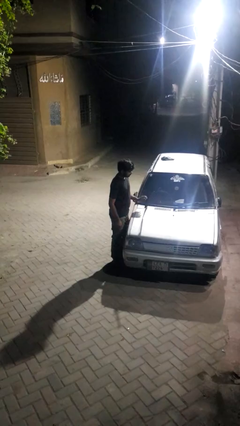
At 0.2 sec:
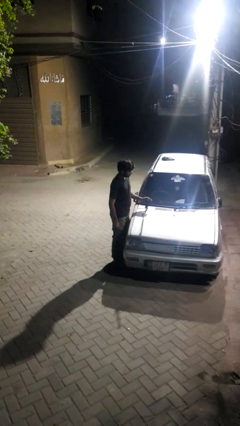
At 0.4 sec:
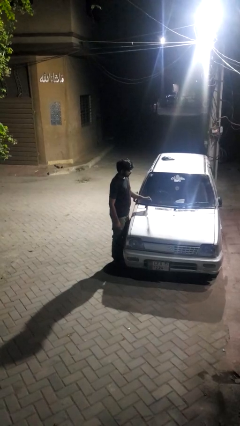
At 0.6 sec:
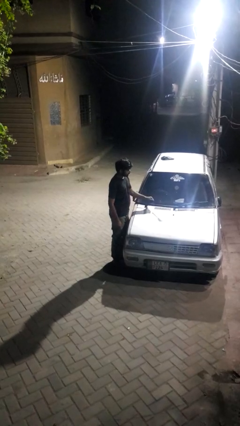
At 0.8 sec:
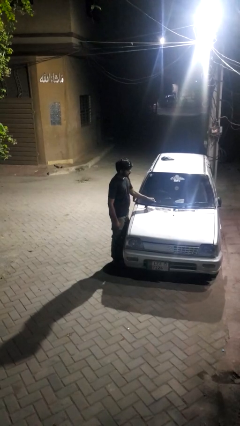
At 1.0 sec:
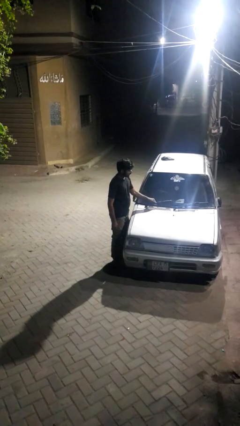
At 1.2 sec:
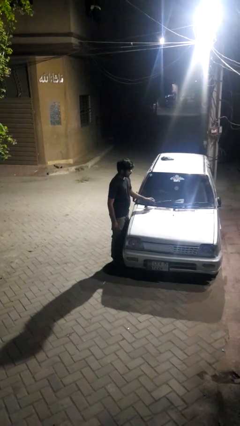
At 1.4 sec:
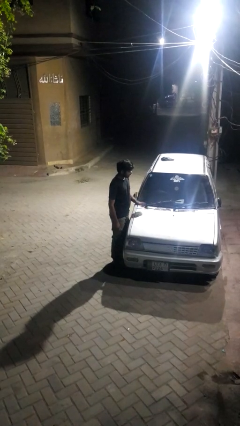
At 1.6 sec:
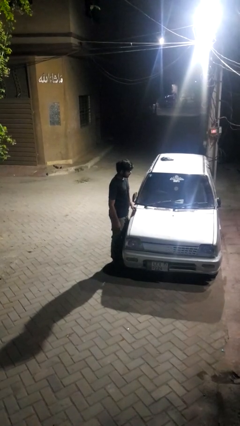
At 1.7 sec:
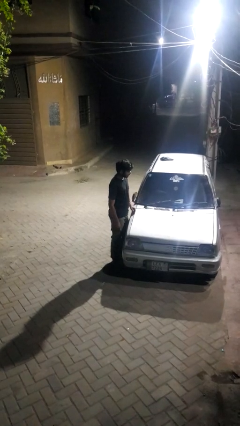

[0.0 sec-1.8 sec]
person flips down car wipers

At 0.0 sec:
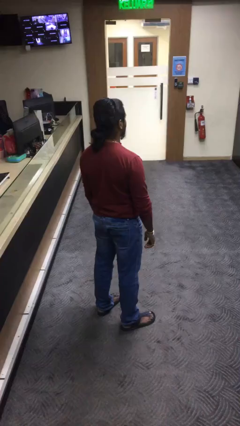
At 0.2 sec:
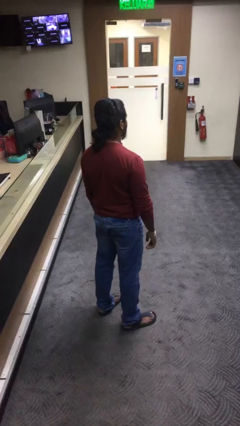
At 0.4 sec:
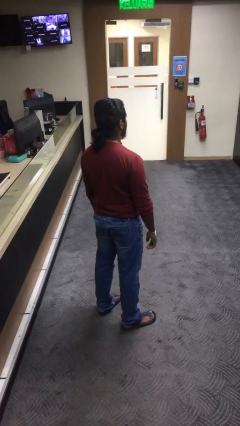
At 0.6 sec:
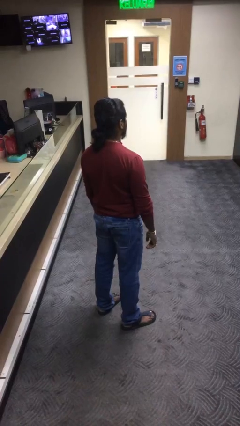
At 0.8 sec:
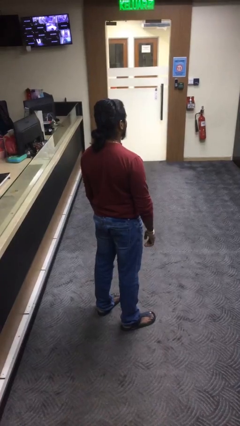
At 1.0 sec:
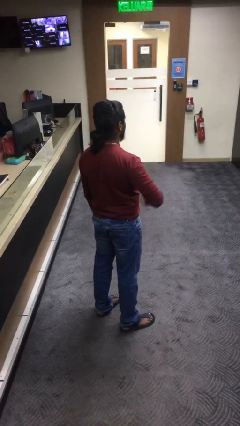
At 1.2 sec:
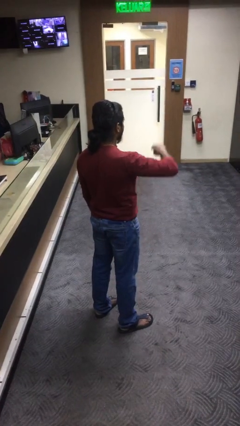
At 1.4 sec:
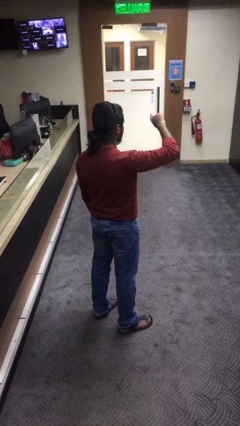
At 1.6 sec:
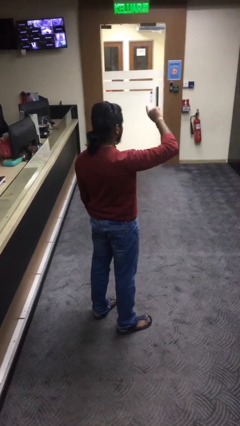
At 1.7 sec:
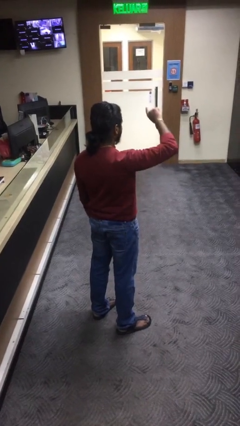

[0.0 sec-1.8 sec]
person gestures swipe up

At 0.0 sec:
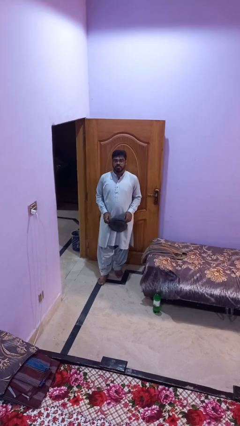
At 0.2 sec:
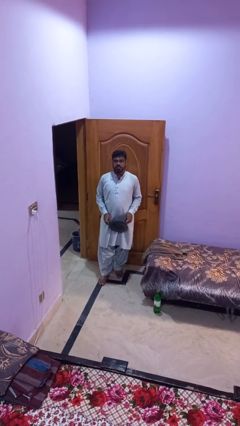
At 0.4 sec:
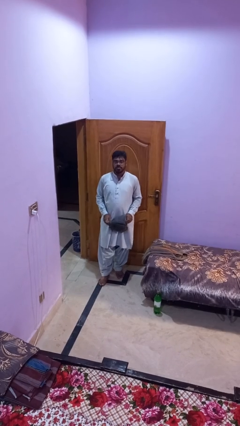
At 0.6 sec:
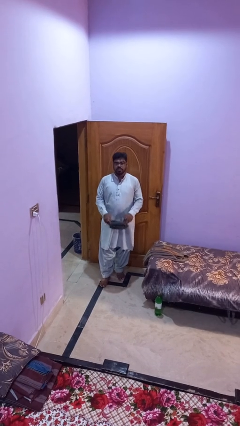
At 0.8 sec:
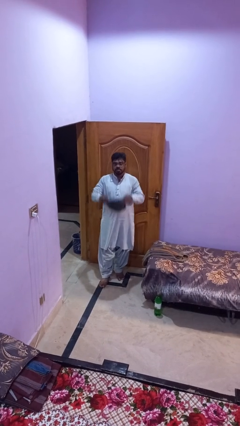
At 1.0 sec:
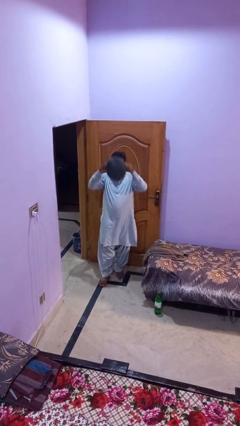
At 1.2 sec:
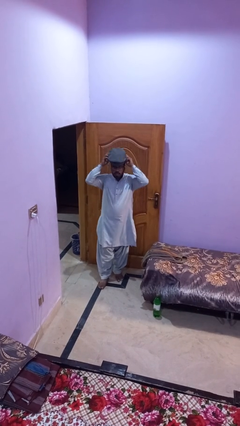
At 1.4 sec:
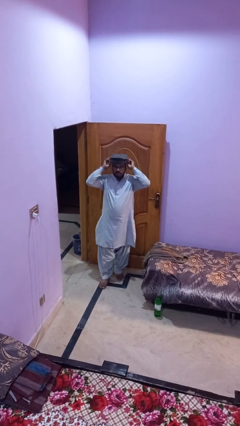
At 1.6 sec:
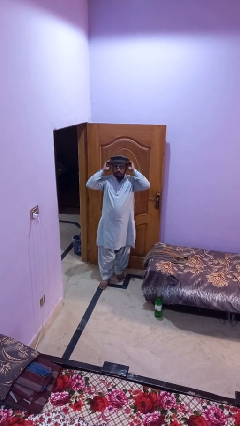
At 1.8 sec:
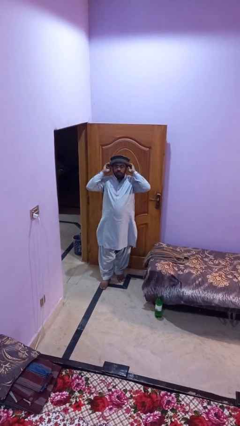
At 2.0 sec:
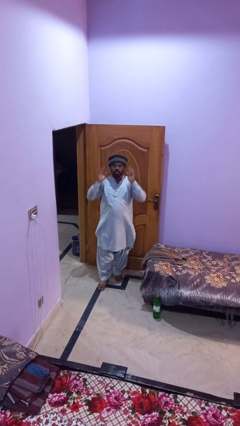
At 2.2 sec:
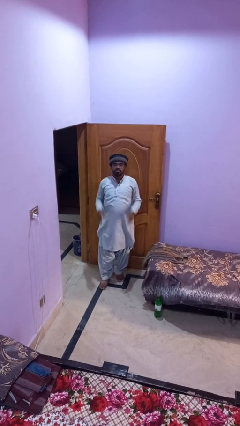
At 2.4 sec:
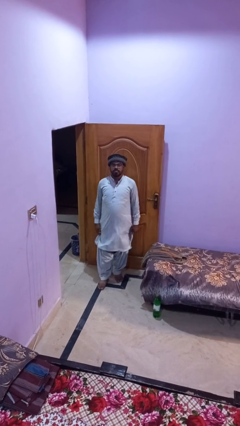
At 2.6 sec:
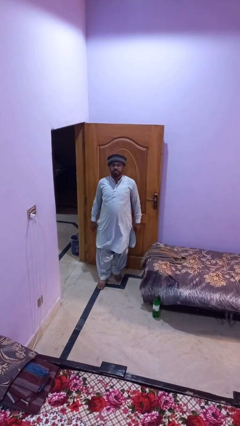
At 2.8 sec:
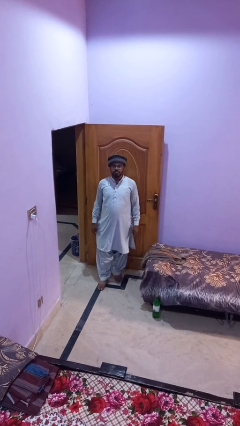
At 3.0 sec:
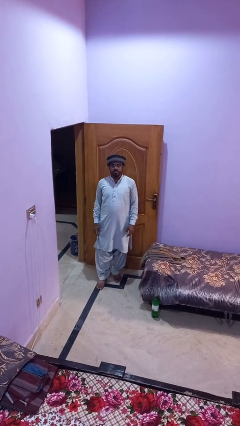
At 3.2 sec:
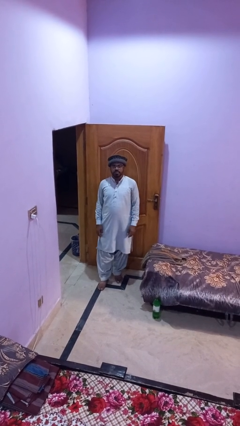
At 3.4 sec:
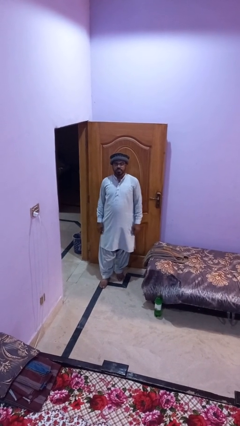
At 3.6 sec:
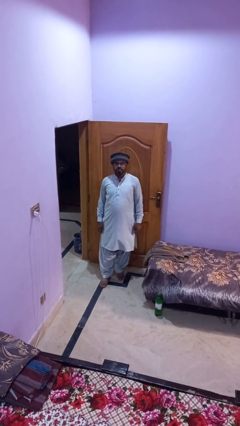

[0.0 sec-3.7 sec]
person puts on hat

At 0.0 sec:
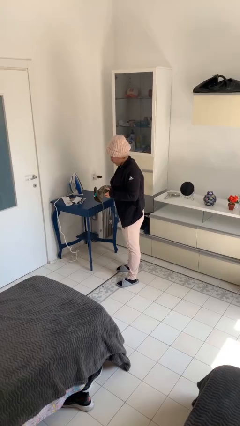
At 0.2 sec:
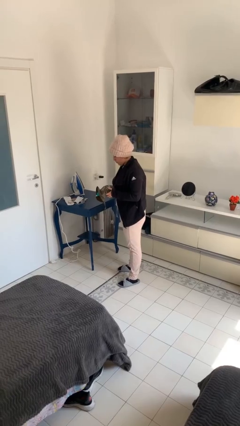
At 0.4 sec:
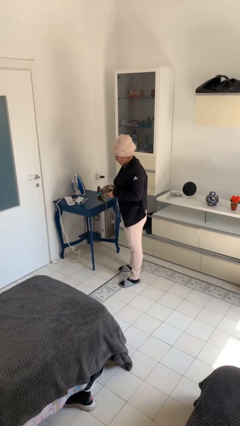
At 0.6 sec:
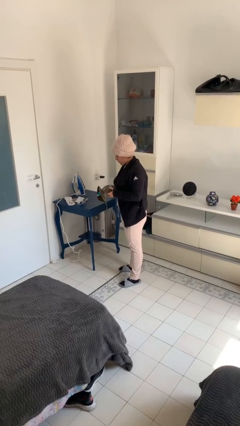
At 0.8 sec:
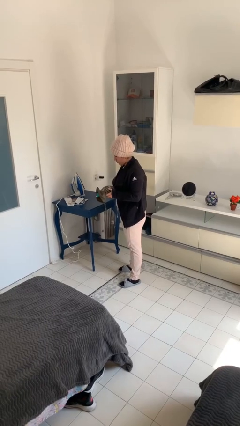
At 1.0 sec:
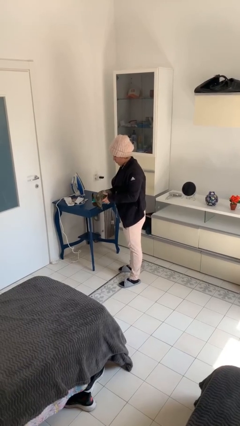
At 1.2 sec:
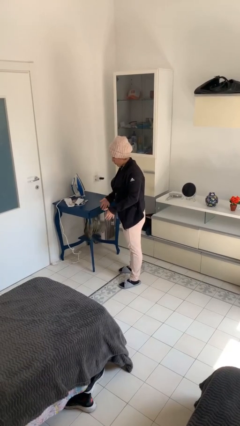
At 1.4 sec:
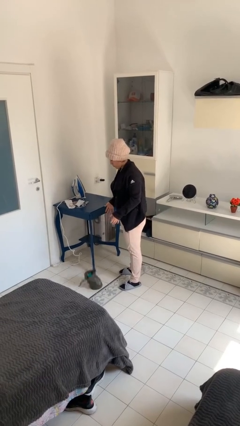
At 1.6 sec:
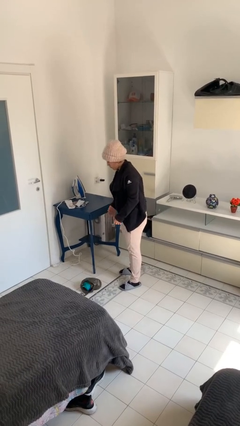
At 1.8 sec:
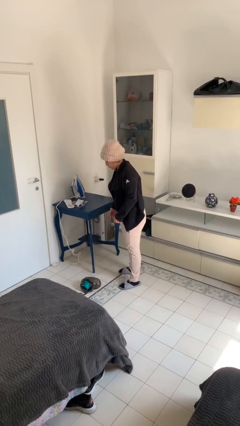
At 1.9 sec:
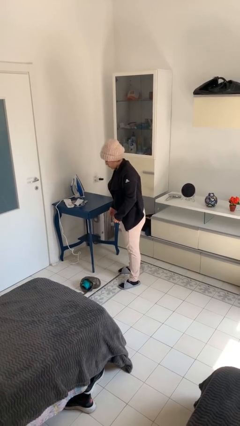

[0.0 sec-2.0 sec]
person drops object

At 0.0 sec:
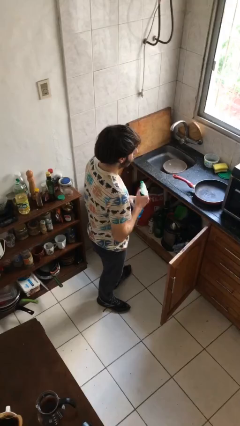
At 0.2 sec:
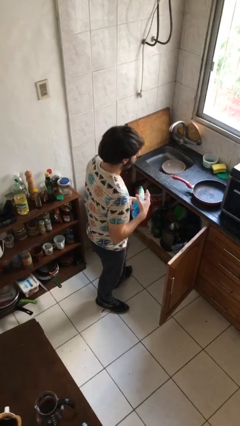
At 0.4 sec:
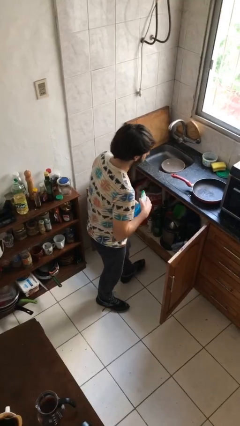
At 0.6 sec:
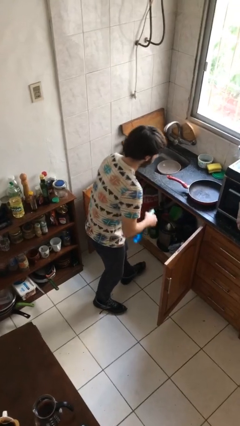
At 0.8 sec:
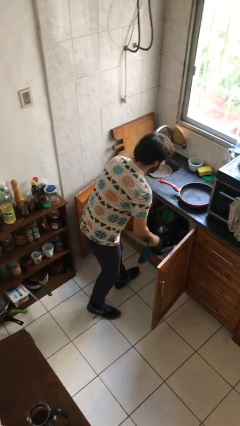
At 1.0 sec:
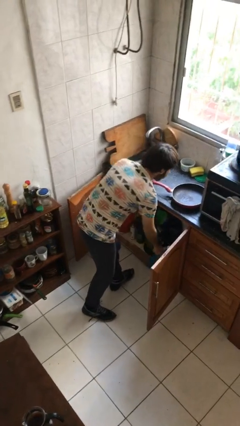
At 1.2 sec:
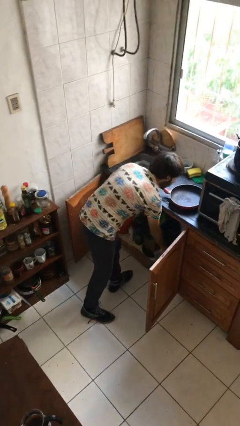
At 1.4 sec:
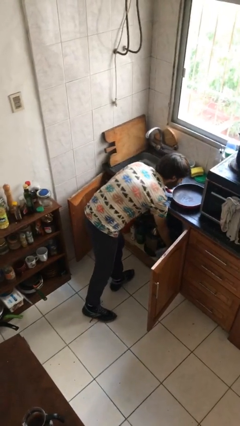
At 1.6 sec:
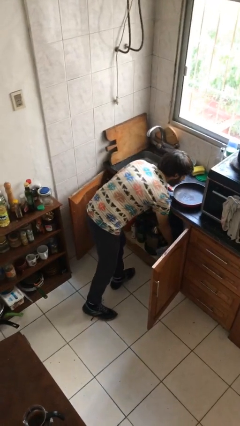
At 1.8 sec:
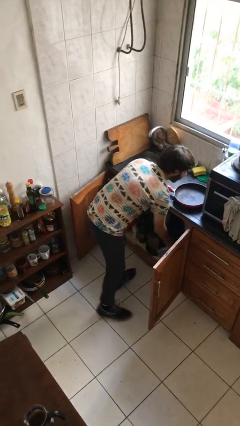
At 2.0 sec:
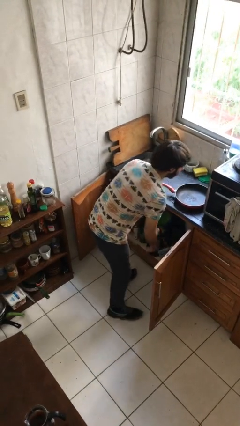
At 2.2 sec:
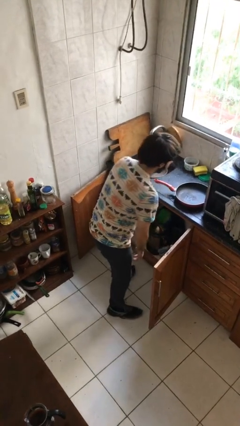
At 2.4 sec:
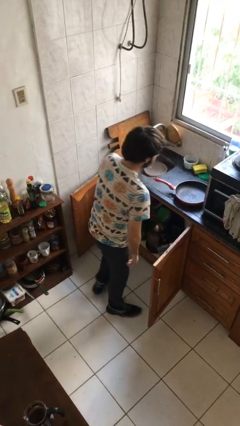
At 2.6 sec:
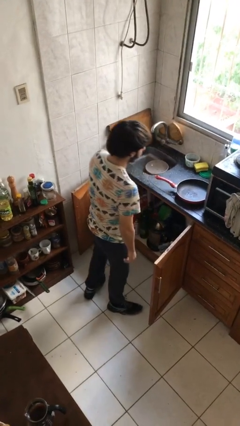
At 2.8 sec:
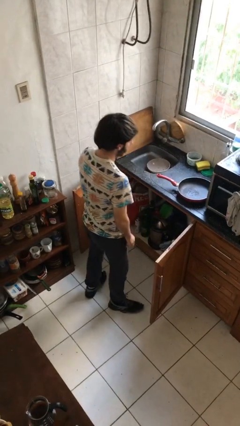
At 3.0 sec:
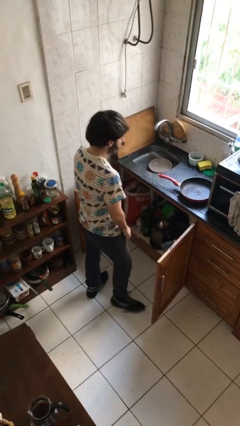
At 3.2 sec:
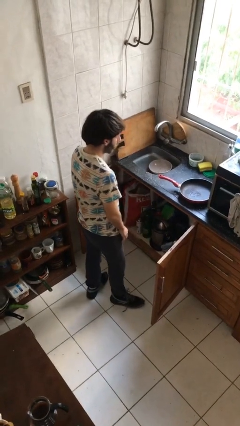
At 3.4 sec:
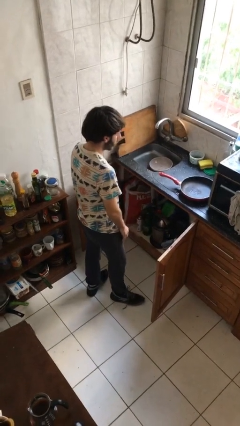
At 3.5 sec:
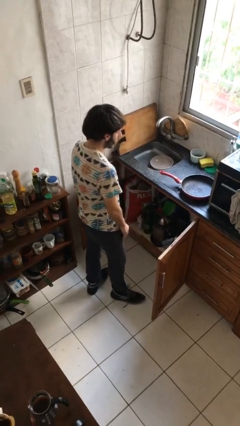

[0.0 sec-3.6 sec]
person puts down object into cabinet

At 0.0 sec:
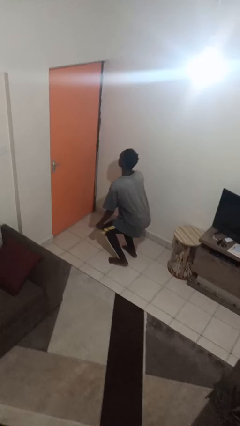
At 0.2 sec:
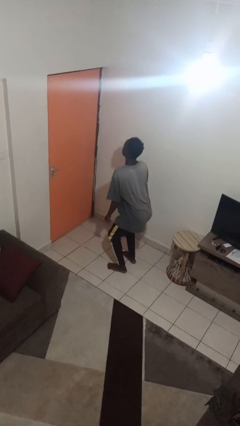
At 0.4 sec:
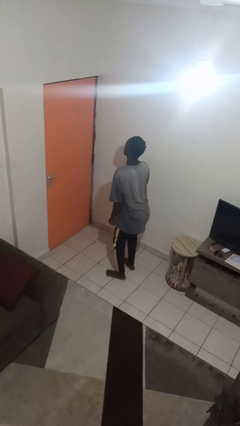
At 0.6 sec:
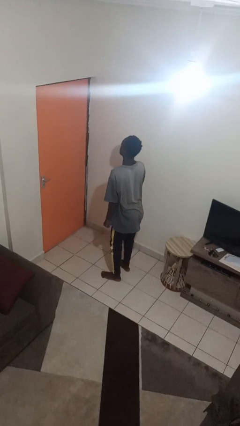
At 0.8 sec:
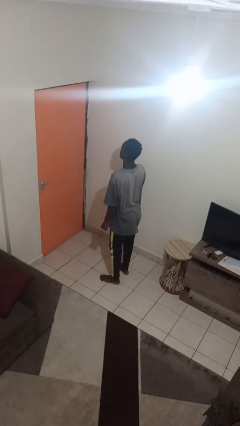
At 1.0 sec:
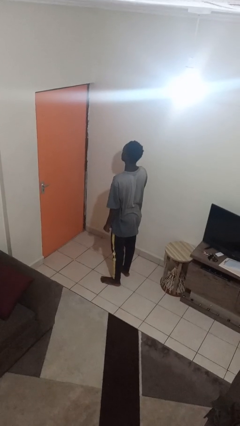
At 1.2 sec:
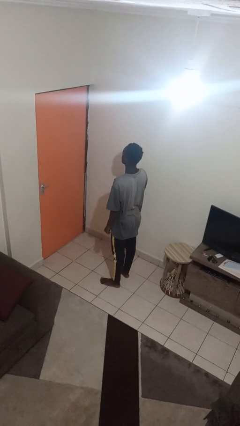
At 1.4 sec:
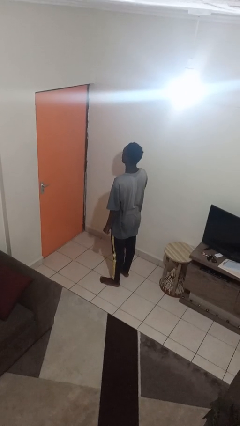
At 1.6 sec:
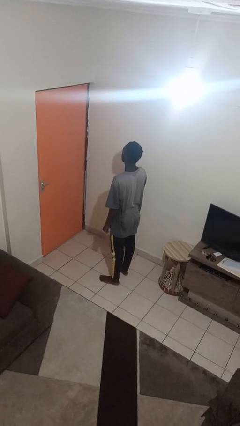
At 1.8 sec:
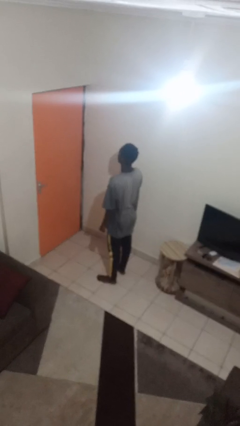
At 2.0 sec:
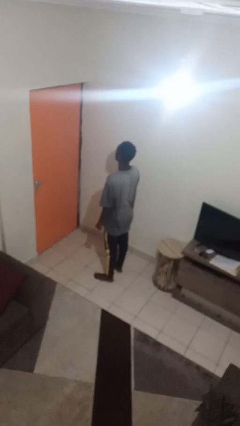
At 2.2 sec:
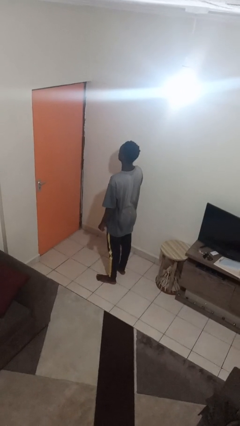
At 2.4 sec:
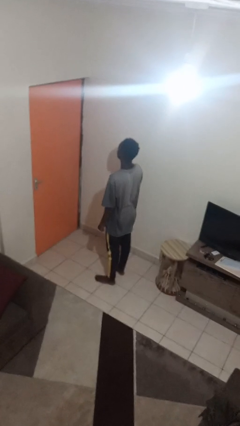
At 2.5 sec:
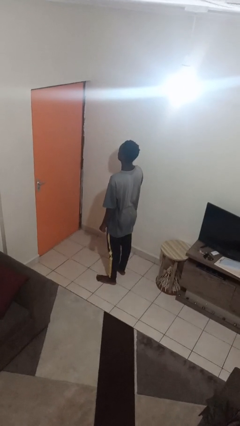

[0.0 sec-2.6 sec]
person stands up

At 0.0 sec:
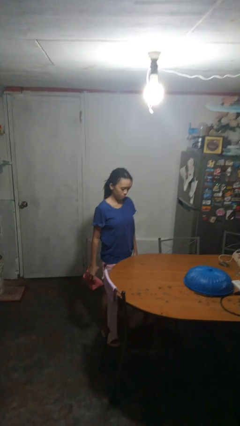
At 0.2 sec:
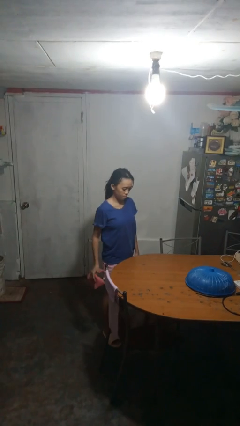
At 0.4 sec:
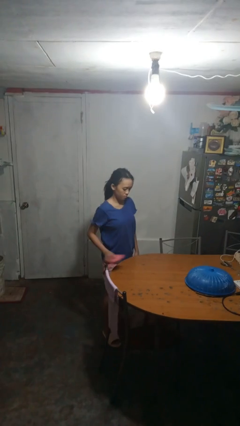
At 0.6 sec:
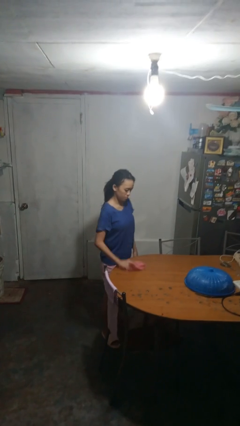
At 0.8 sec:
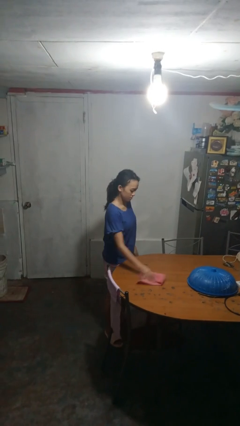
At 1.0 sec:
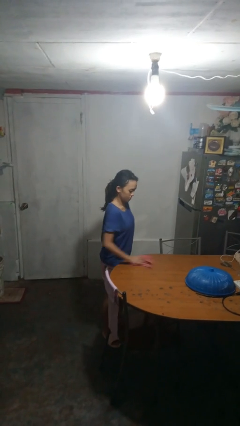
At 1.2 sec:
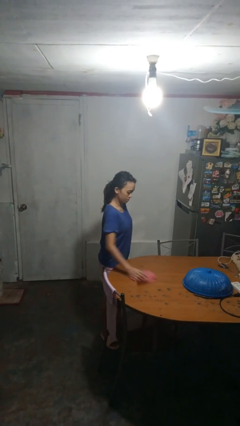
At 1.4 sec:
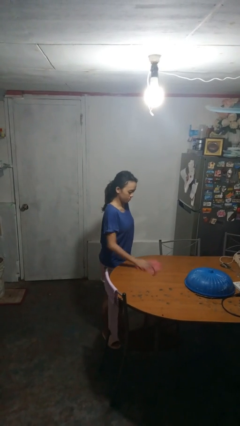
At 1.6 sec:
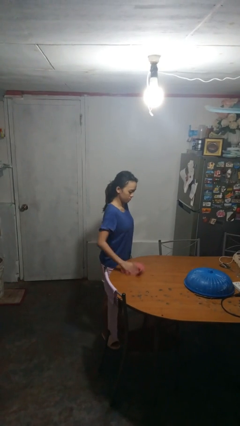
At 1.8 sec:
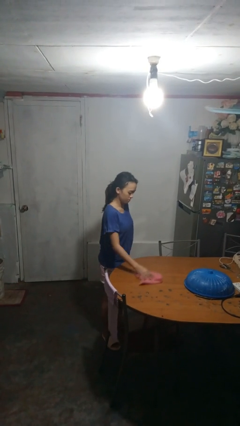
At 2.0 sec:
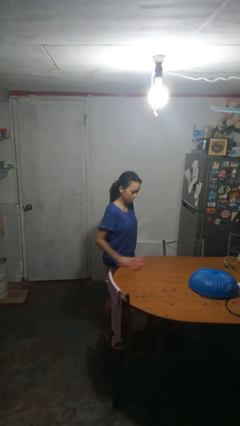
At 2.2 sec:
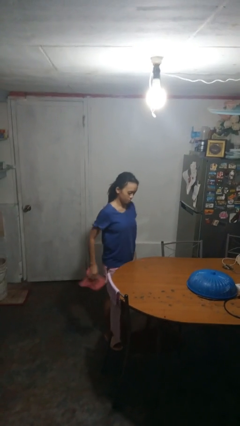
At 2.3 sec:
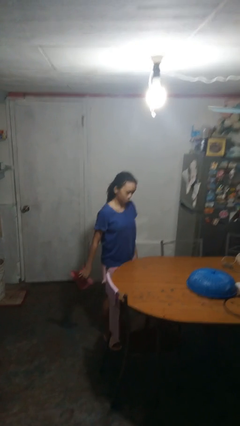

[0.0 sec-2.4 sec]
person cleans table with rag
